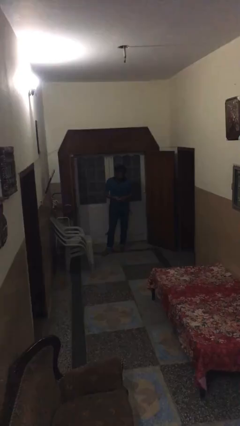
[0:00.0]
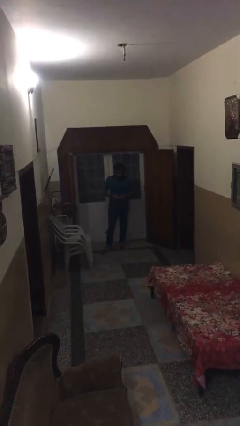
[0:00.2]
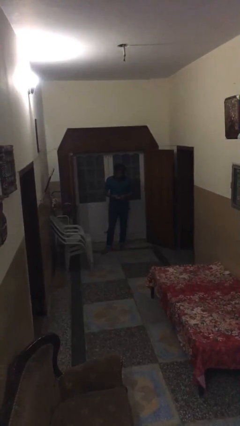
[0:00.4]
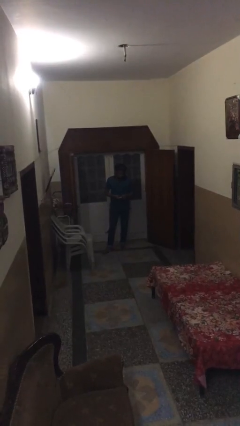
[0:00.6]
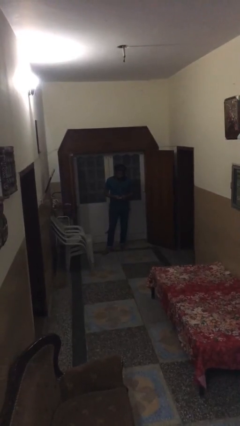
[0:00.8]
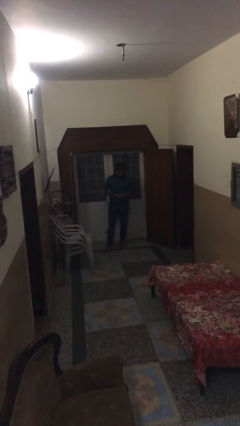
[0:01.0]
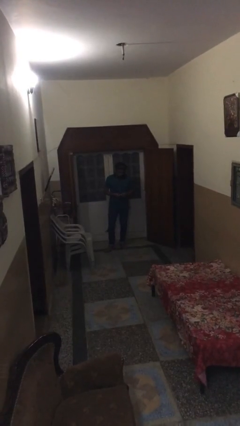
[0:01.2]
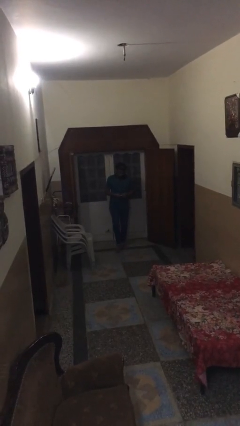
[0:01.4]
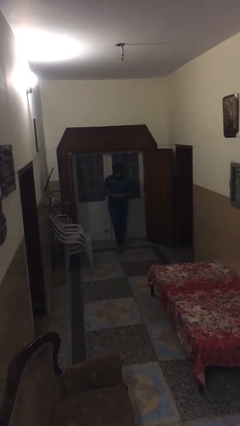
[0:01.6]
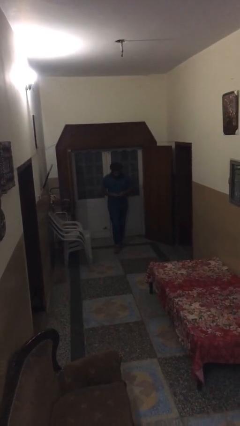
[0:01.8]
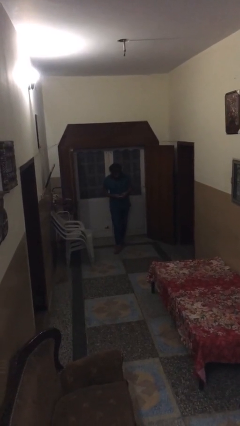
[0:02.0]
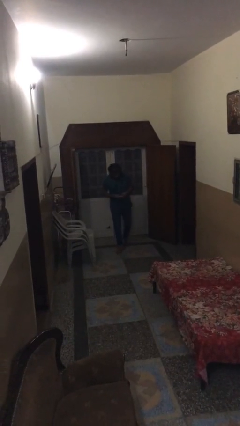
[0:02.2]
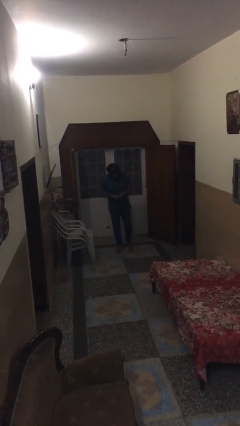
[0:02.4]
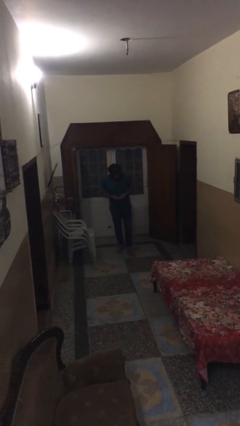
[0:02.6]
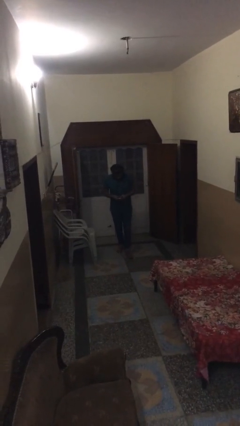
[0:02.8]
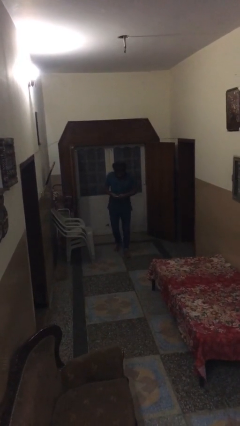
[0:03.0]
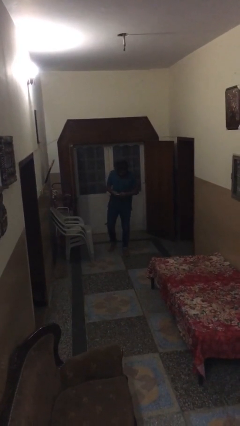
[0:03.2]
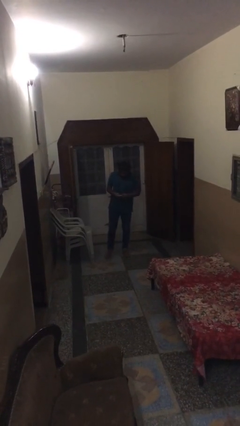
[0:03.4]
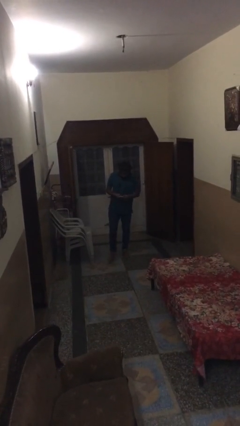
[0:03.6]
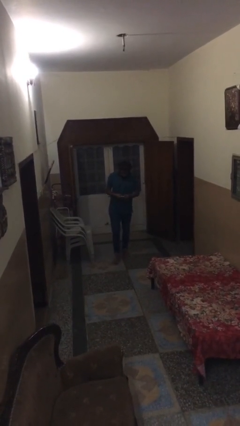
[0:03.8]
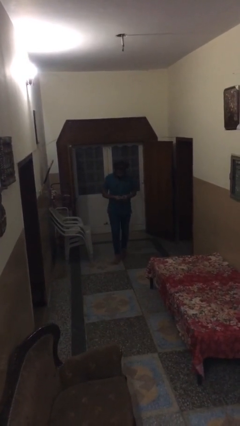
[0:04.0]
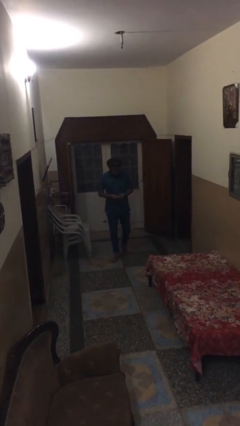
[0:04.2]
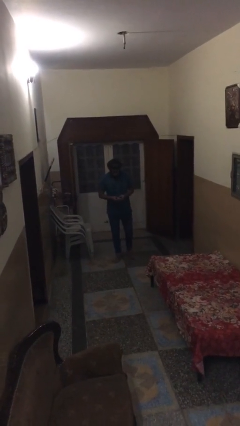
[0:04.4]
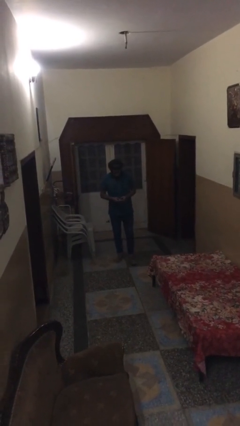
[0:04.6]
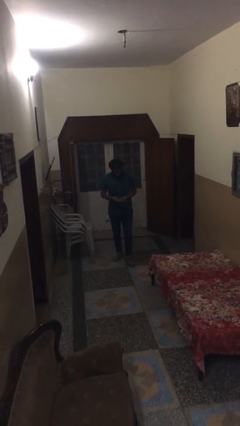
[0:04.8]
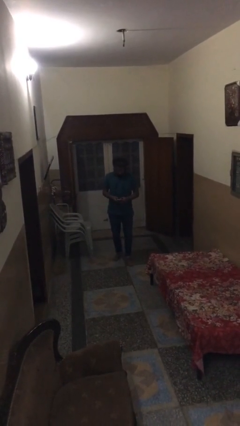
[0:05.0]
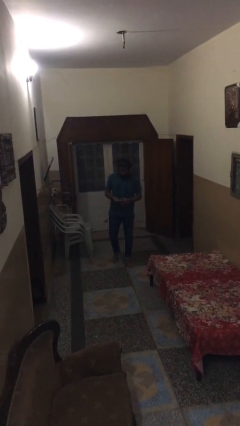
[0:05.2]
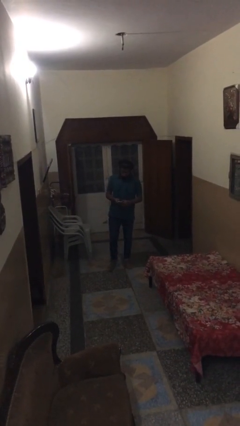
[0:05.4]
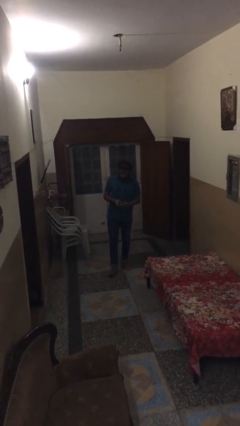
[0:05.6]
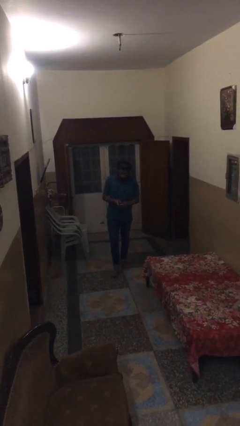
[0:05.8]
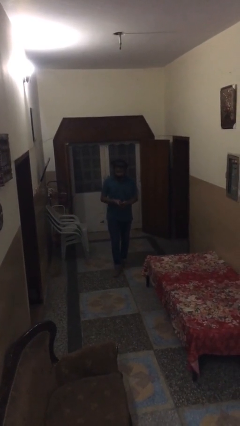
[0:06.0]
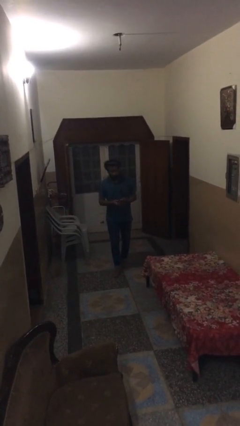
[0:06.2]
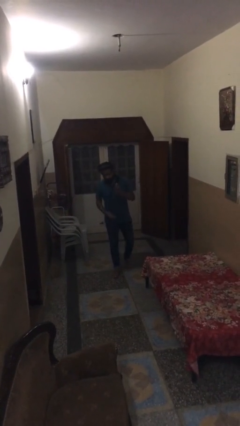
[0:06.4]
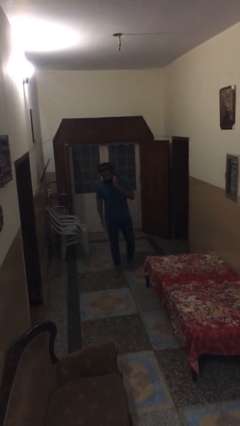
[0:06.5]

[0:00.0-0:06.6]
person texts on phone

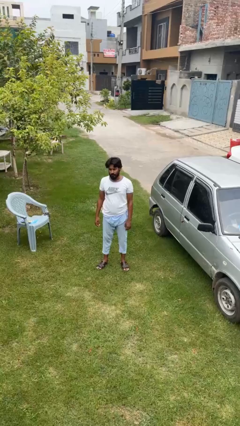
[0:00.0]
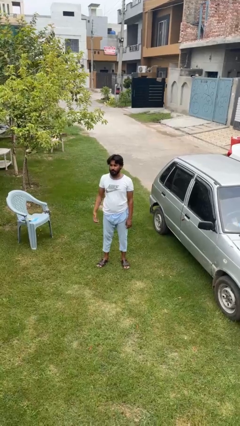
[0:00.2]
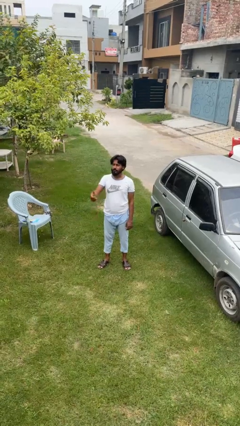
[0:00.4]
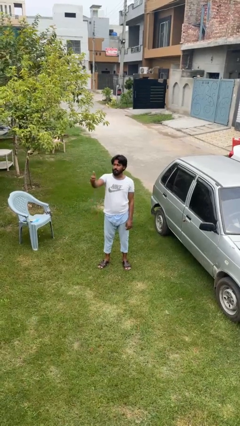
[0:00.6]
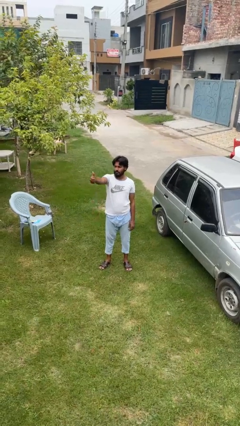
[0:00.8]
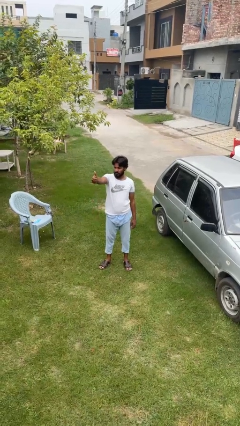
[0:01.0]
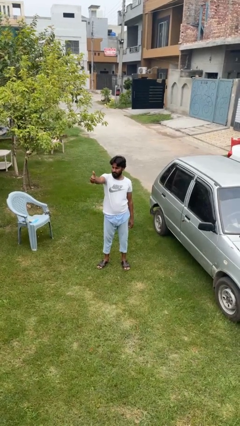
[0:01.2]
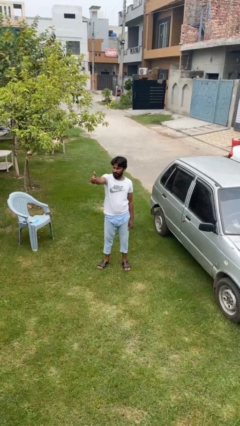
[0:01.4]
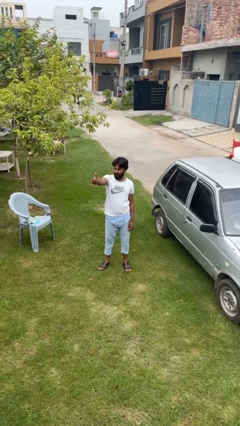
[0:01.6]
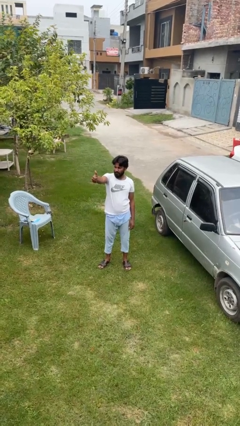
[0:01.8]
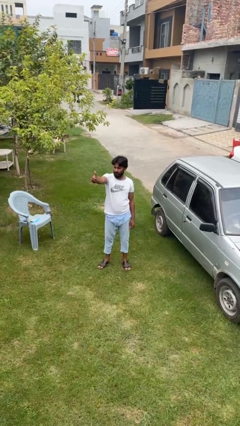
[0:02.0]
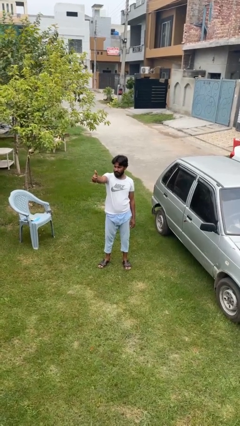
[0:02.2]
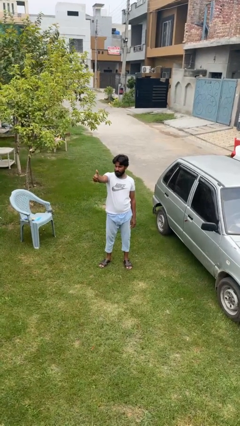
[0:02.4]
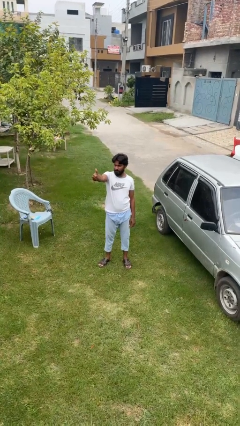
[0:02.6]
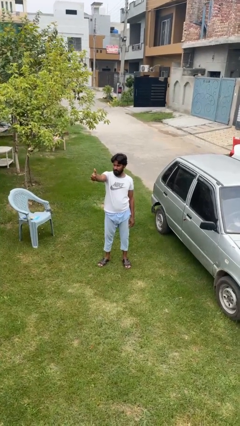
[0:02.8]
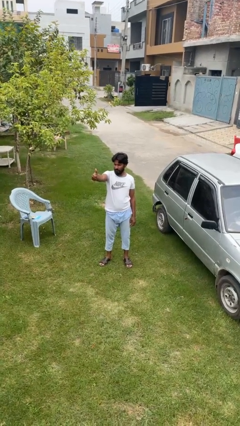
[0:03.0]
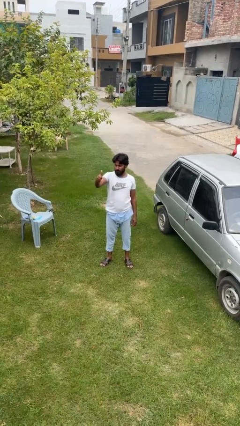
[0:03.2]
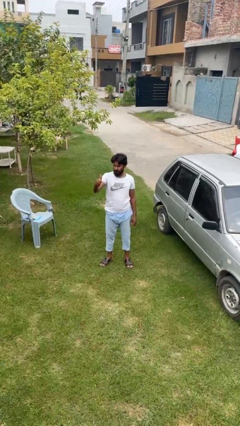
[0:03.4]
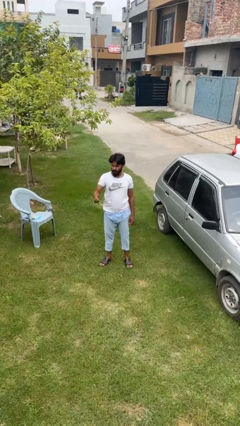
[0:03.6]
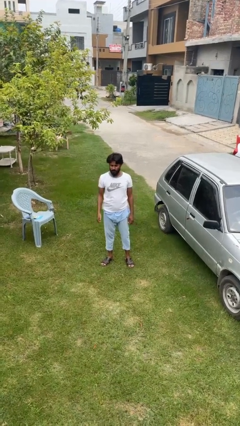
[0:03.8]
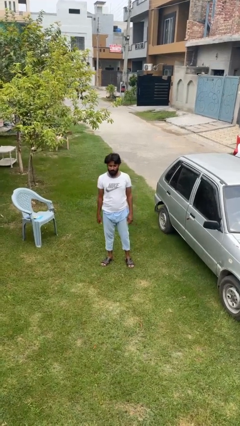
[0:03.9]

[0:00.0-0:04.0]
person gestures thumbs up

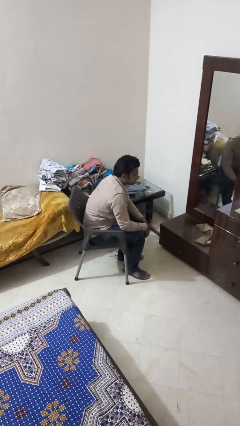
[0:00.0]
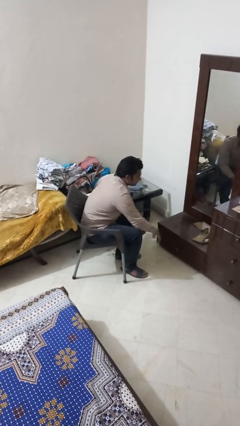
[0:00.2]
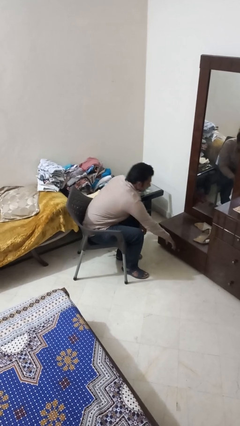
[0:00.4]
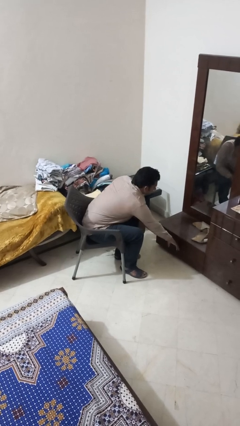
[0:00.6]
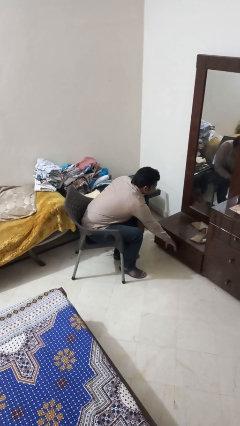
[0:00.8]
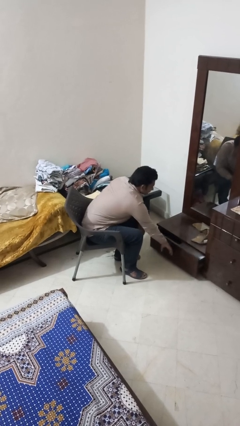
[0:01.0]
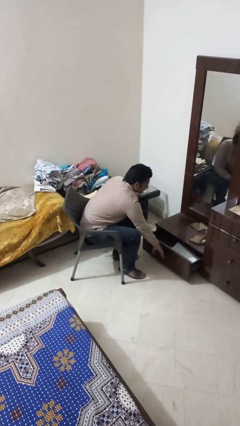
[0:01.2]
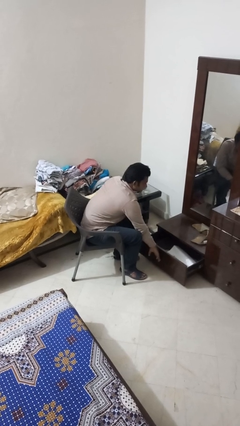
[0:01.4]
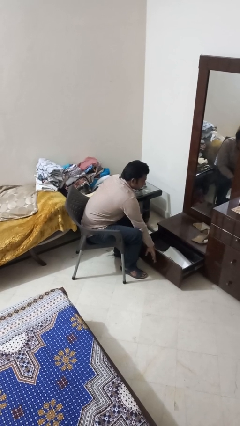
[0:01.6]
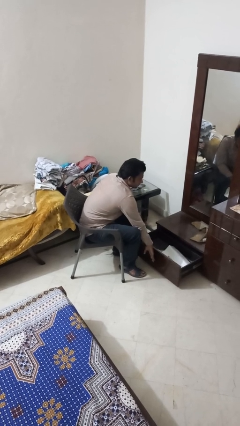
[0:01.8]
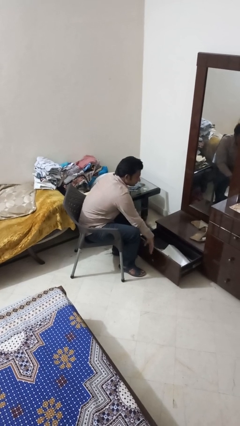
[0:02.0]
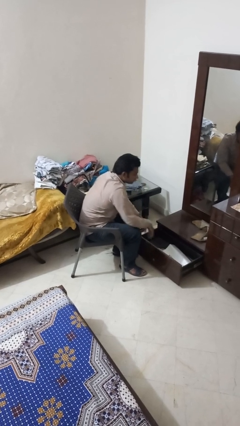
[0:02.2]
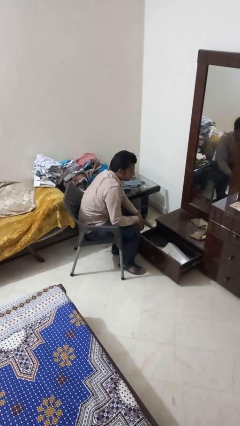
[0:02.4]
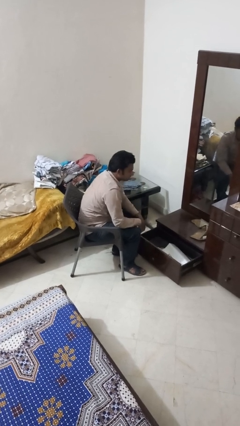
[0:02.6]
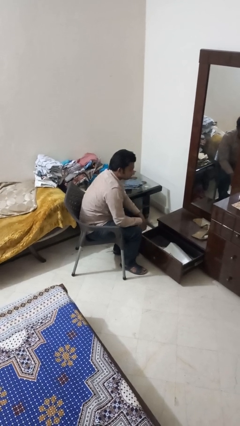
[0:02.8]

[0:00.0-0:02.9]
person opens dresser drawer

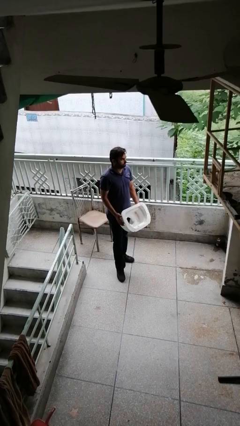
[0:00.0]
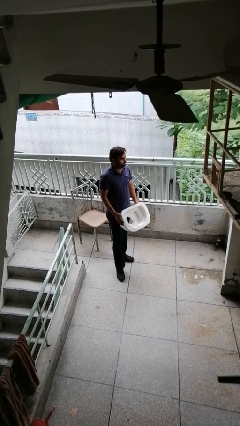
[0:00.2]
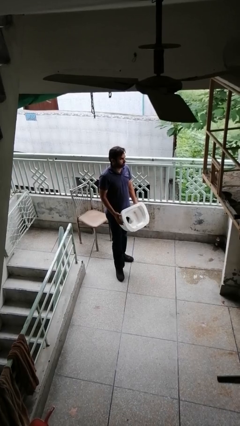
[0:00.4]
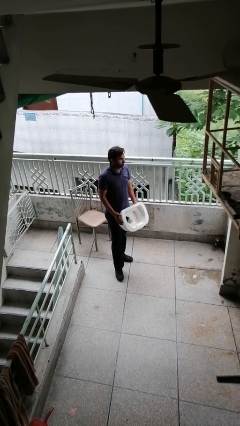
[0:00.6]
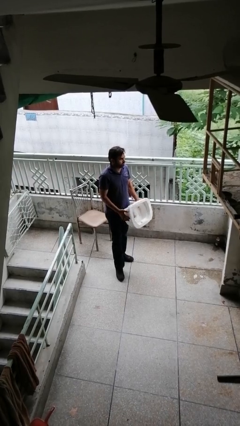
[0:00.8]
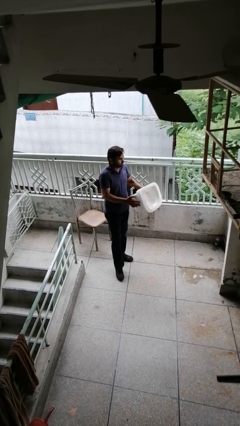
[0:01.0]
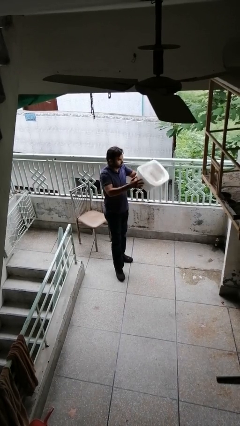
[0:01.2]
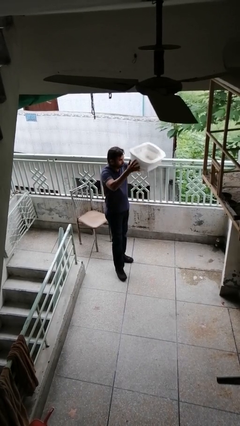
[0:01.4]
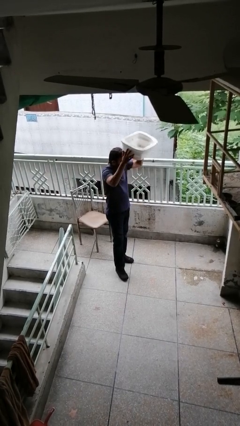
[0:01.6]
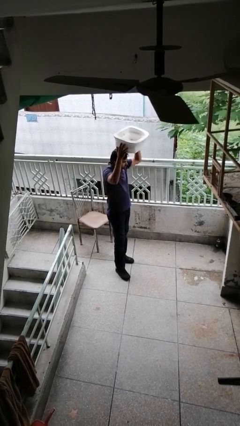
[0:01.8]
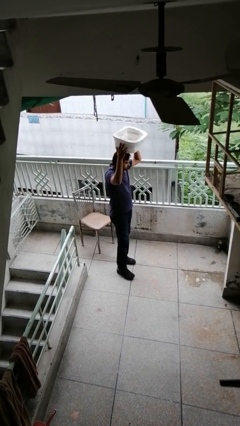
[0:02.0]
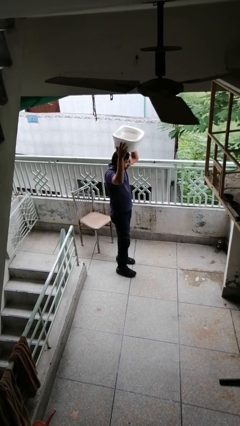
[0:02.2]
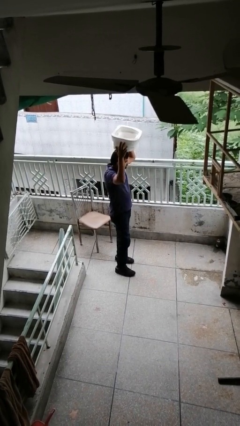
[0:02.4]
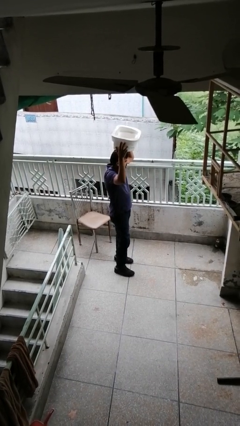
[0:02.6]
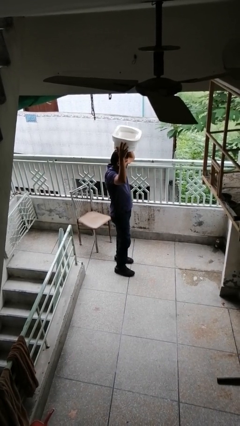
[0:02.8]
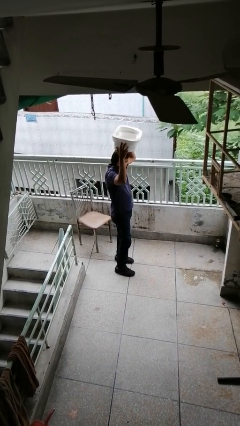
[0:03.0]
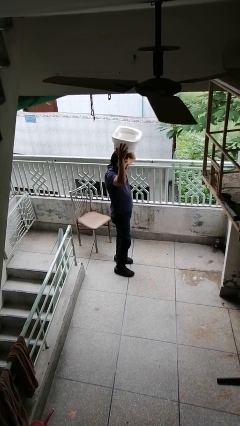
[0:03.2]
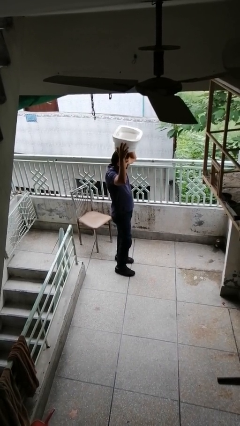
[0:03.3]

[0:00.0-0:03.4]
person holds object above head

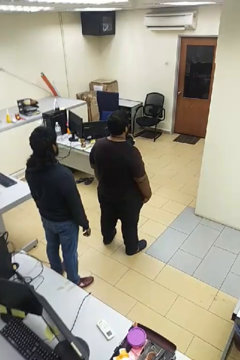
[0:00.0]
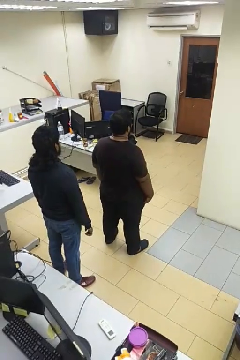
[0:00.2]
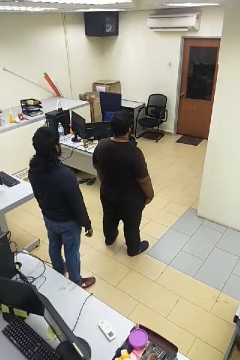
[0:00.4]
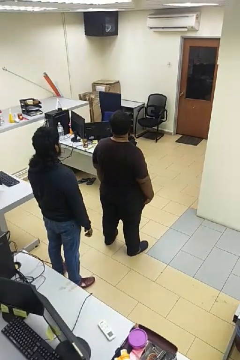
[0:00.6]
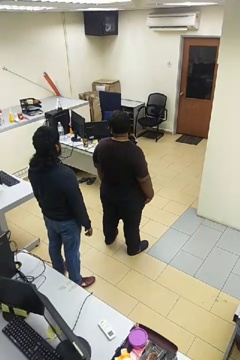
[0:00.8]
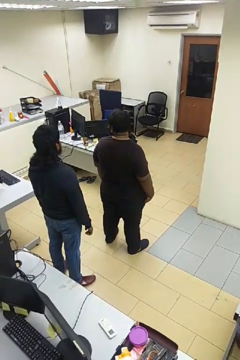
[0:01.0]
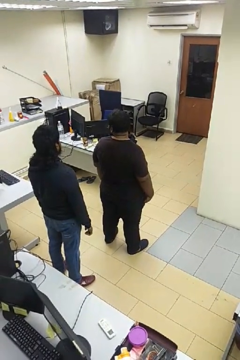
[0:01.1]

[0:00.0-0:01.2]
person looks over shoulder
